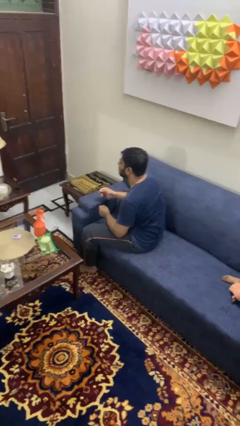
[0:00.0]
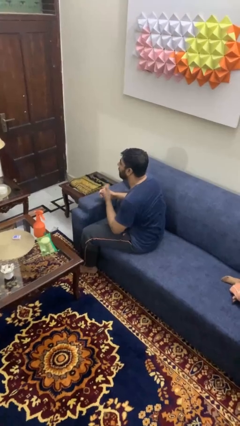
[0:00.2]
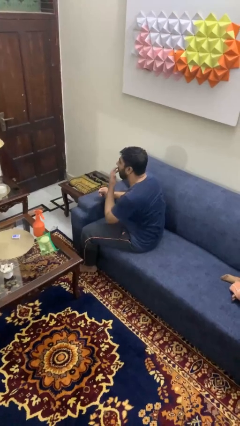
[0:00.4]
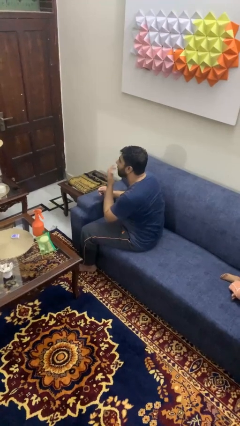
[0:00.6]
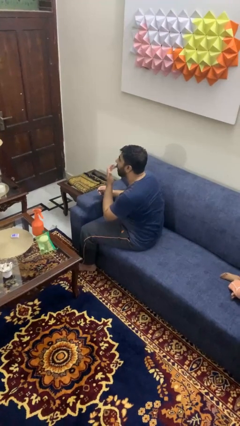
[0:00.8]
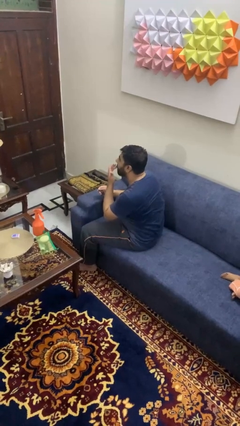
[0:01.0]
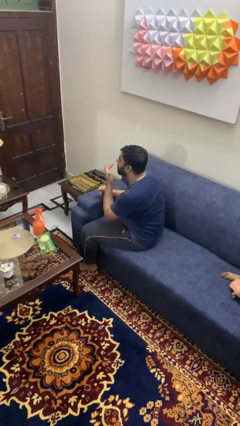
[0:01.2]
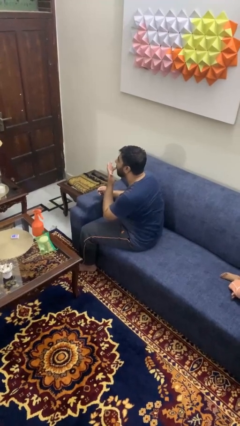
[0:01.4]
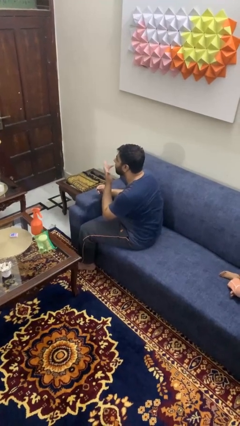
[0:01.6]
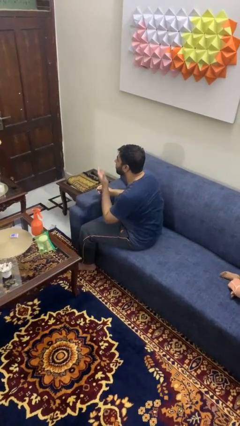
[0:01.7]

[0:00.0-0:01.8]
person licks fingers

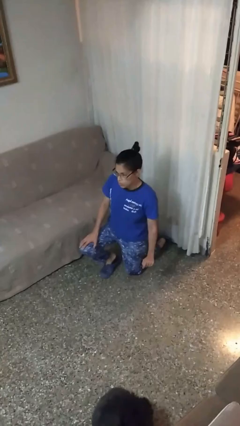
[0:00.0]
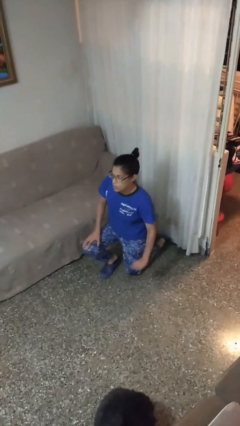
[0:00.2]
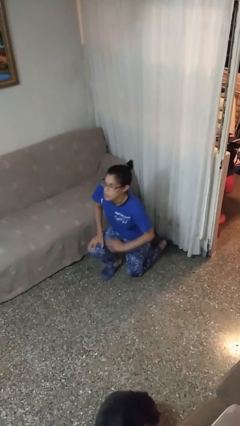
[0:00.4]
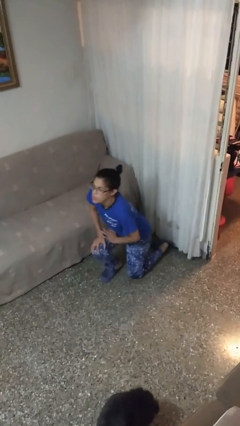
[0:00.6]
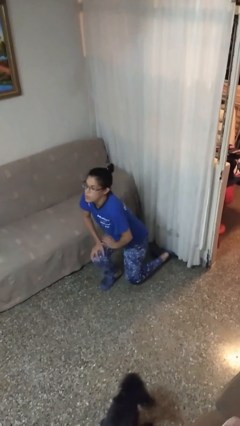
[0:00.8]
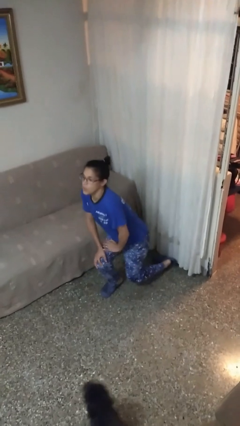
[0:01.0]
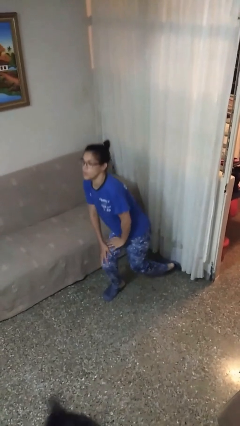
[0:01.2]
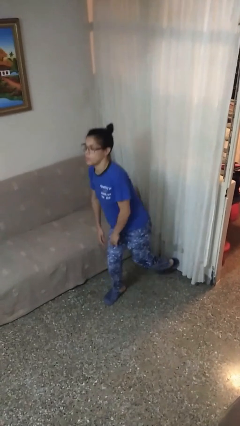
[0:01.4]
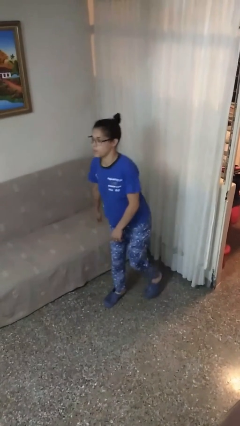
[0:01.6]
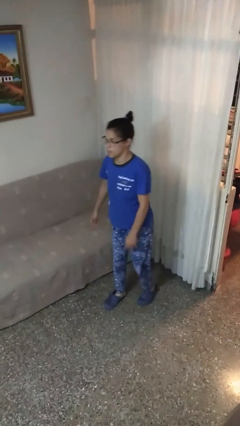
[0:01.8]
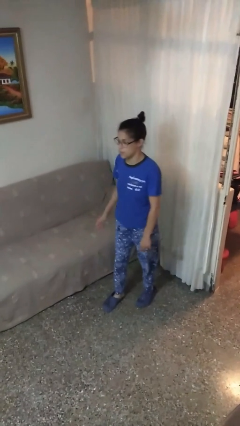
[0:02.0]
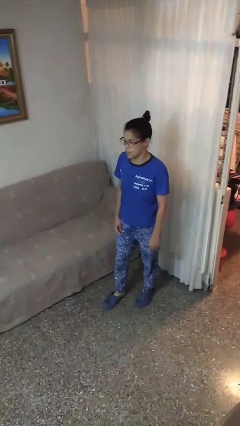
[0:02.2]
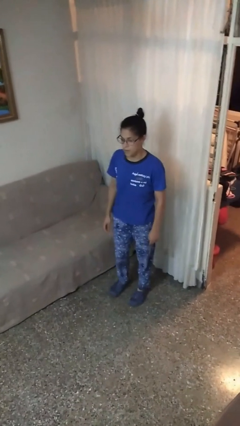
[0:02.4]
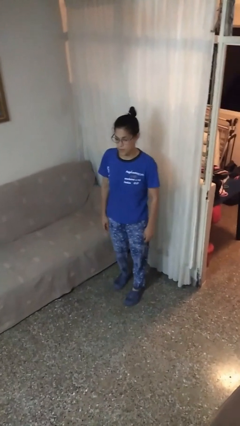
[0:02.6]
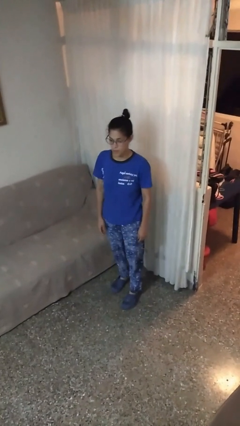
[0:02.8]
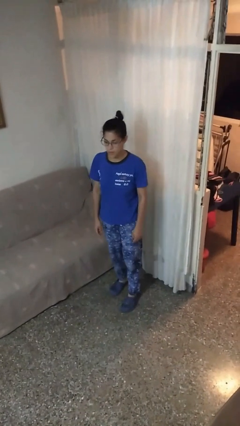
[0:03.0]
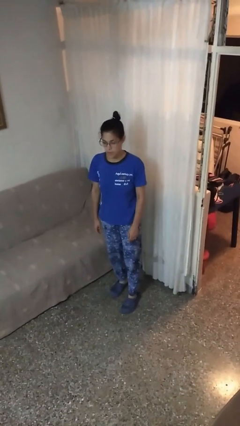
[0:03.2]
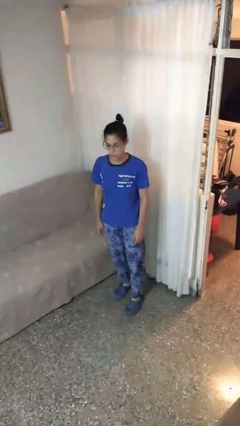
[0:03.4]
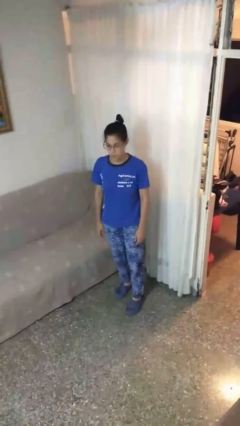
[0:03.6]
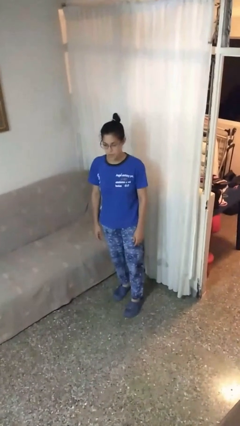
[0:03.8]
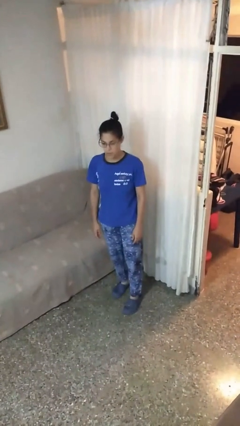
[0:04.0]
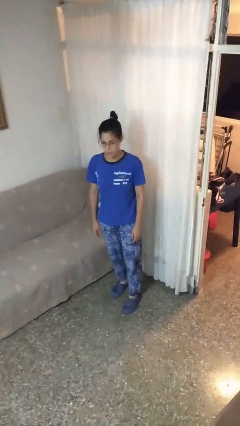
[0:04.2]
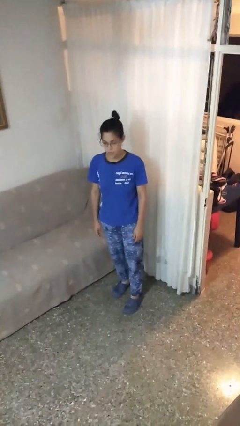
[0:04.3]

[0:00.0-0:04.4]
person stands up from floor

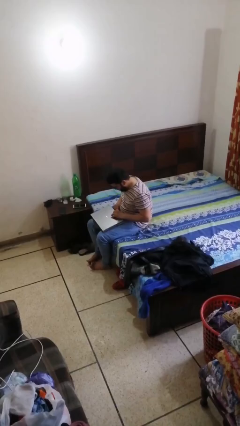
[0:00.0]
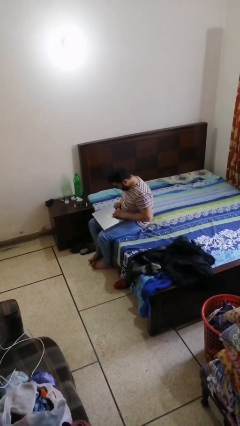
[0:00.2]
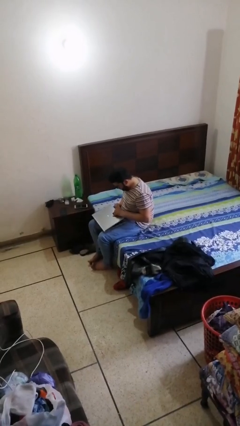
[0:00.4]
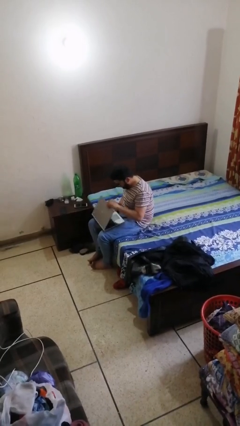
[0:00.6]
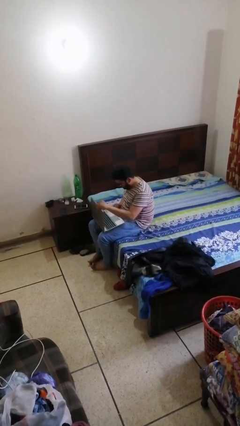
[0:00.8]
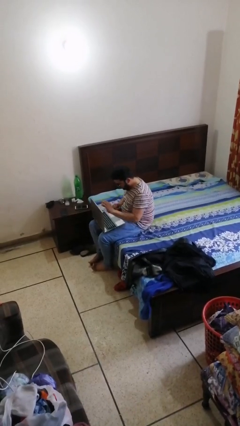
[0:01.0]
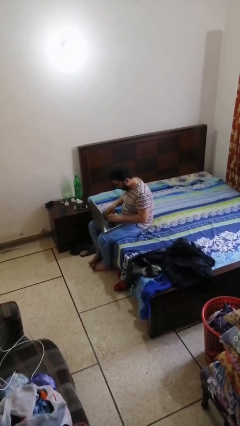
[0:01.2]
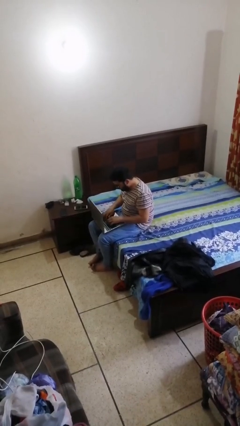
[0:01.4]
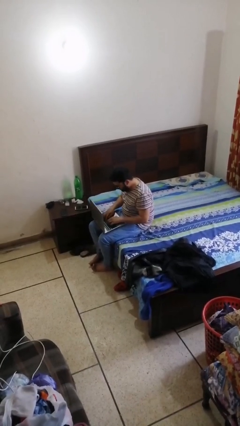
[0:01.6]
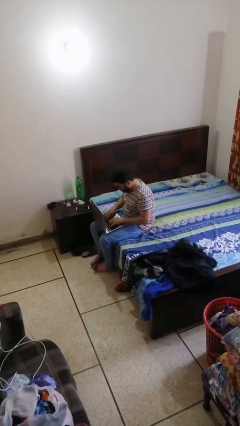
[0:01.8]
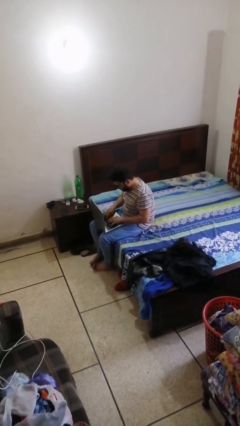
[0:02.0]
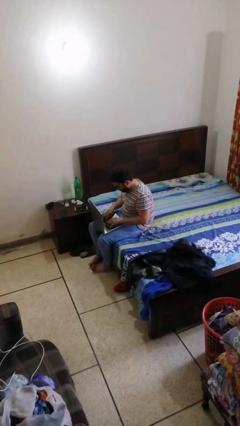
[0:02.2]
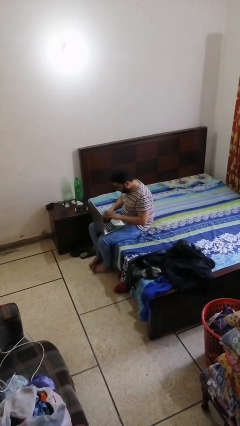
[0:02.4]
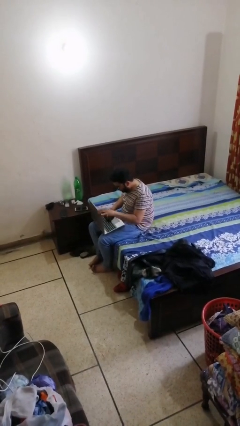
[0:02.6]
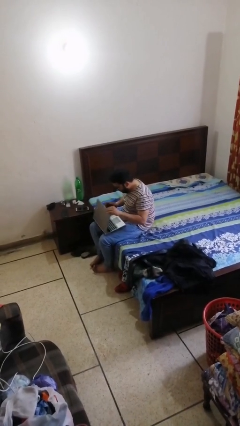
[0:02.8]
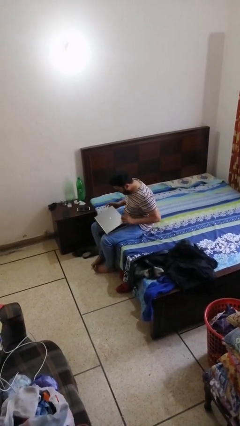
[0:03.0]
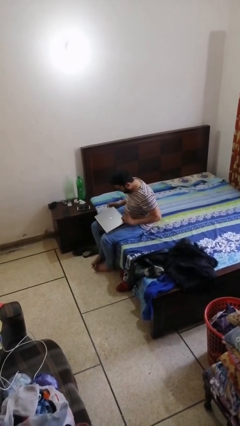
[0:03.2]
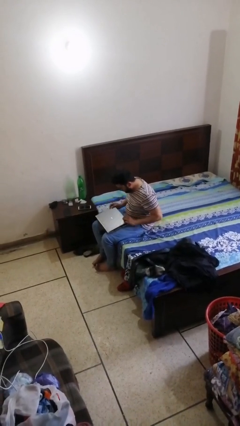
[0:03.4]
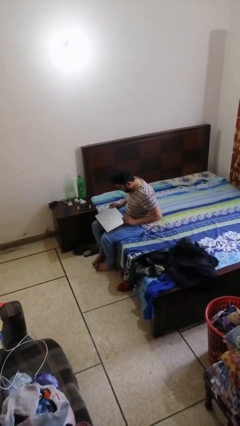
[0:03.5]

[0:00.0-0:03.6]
person interacts with laptop

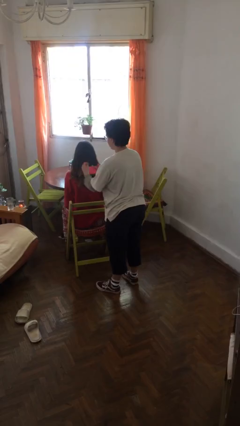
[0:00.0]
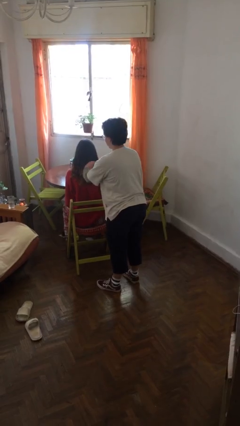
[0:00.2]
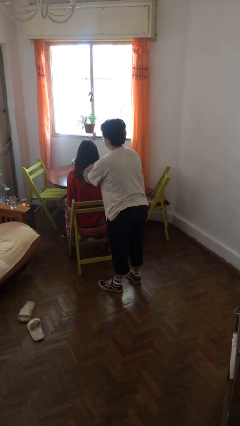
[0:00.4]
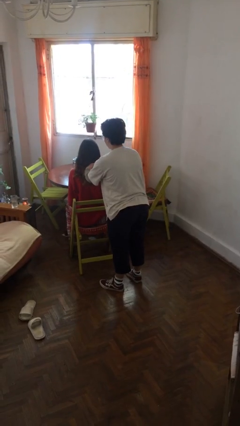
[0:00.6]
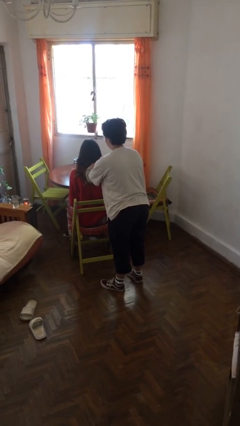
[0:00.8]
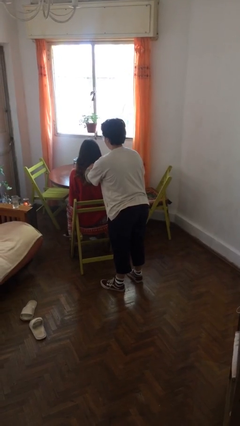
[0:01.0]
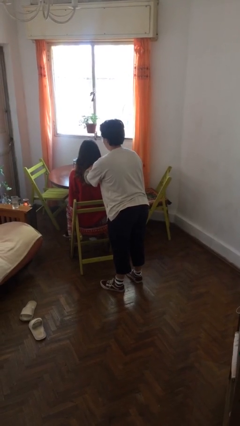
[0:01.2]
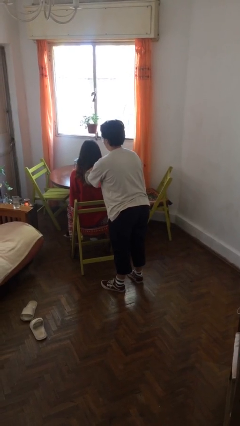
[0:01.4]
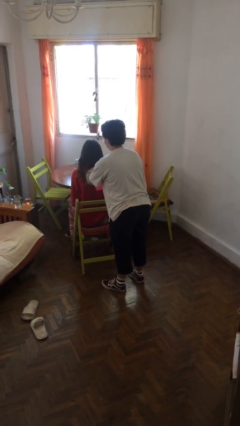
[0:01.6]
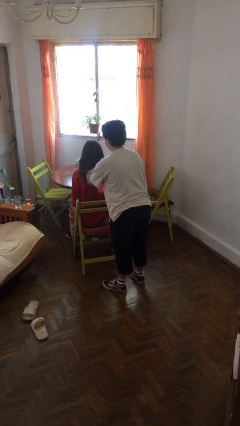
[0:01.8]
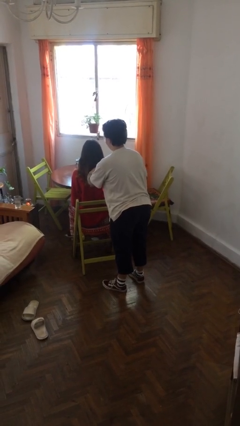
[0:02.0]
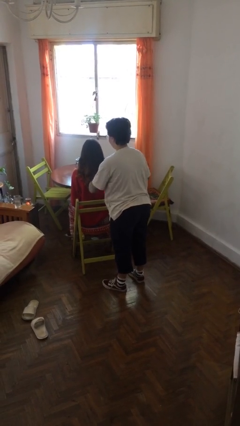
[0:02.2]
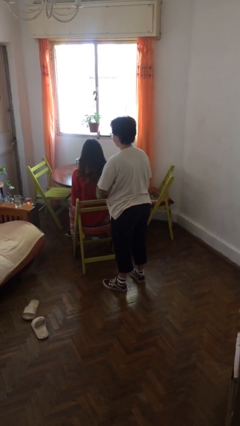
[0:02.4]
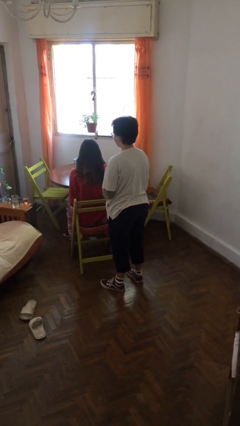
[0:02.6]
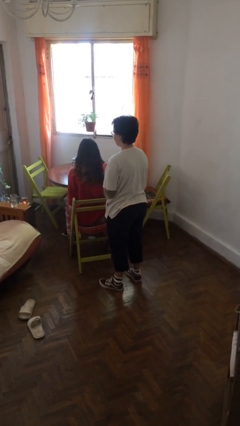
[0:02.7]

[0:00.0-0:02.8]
person brushes hair of person

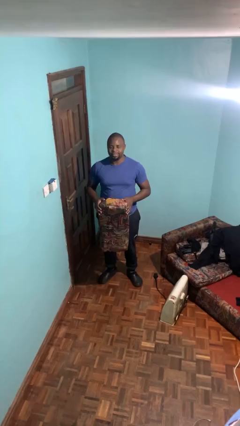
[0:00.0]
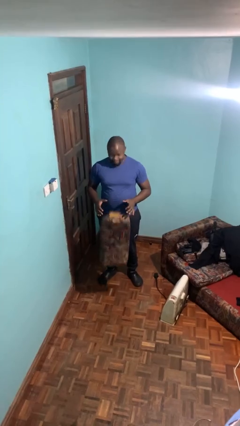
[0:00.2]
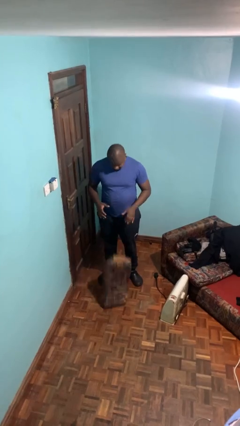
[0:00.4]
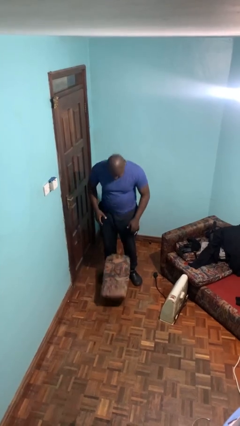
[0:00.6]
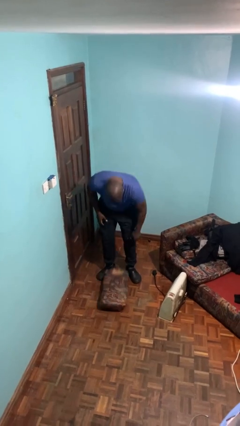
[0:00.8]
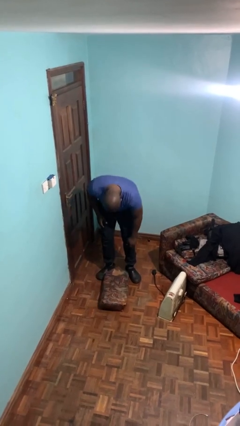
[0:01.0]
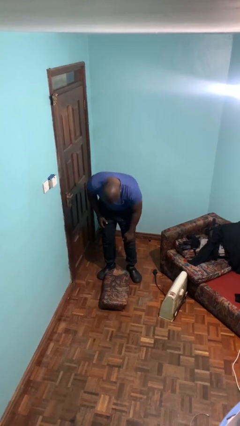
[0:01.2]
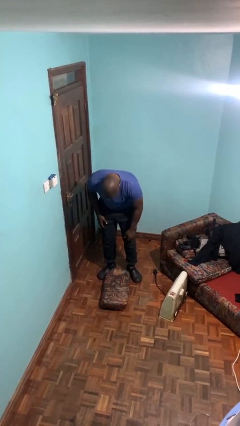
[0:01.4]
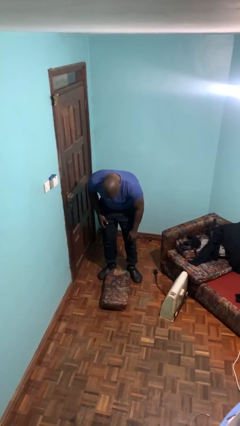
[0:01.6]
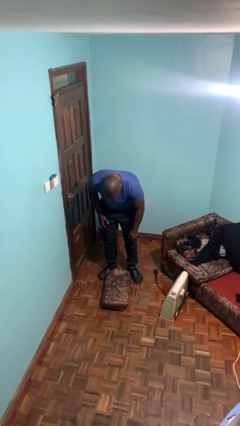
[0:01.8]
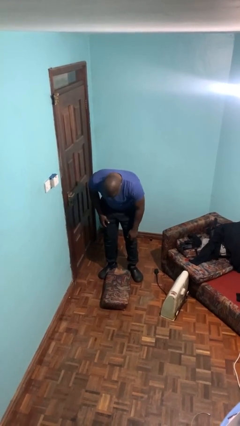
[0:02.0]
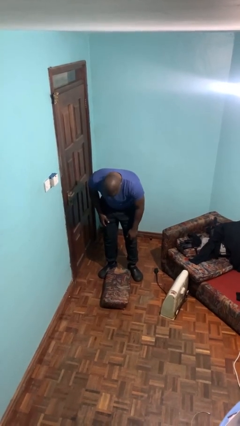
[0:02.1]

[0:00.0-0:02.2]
person drops object

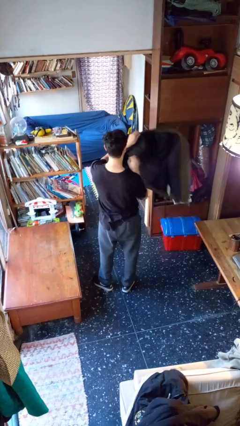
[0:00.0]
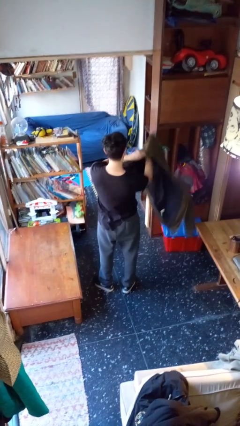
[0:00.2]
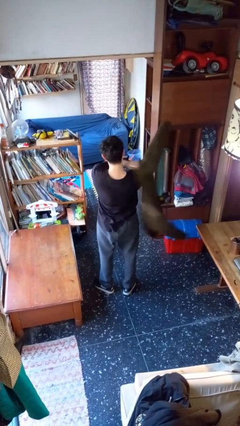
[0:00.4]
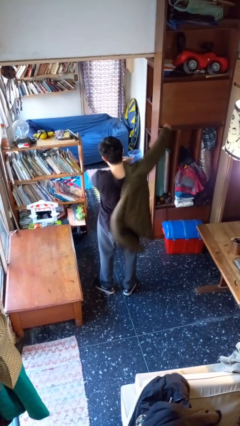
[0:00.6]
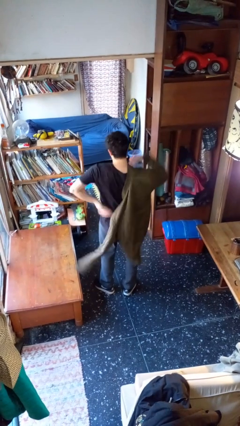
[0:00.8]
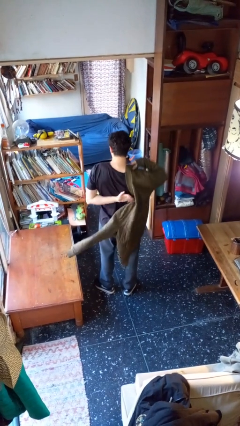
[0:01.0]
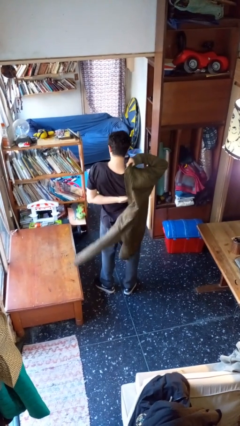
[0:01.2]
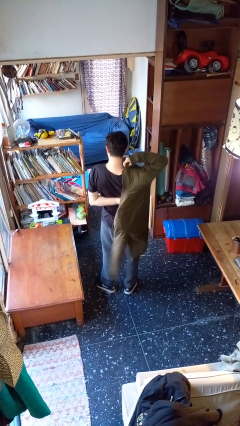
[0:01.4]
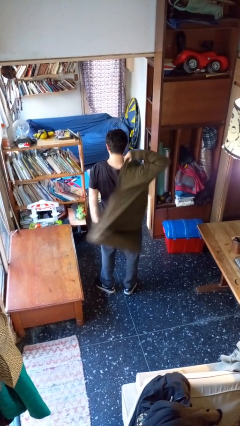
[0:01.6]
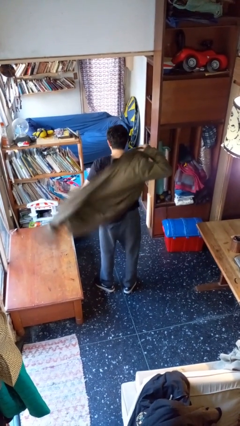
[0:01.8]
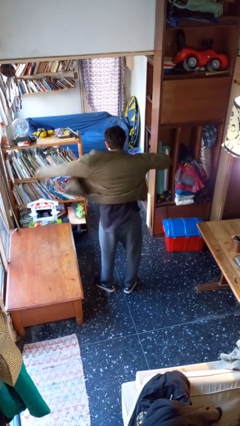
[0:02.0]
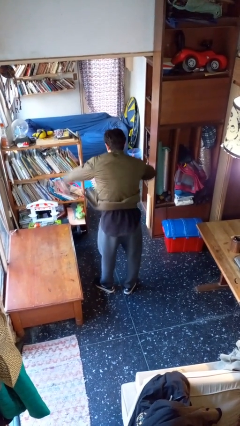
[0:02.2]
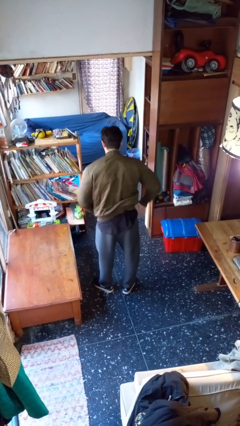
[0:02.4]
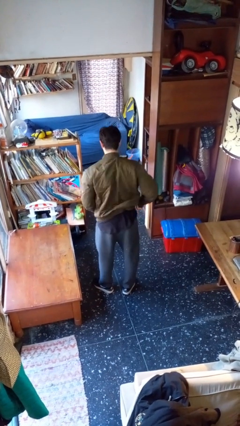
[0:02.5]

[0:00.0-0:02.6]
person puts on jacket
